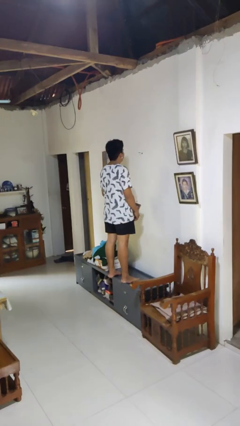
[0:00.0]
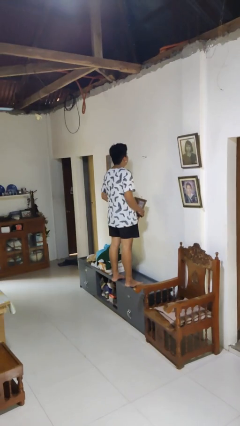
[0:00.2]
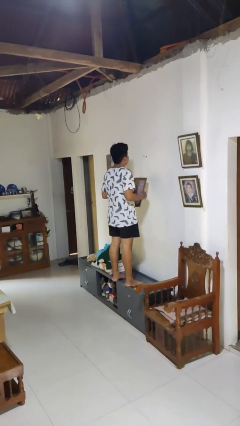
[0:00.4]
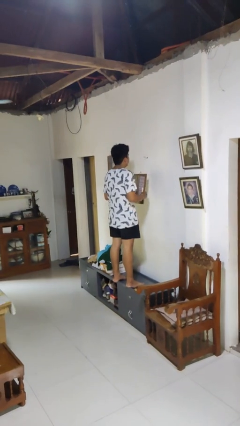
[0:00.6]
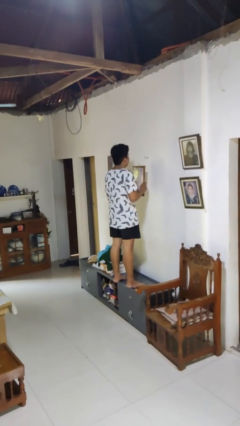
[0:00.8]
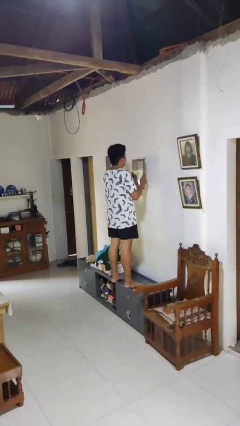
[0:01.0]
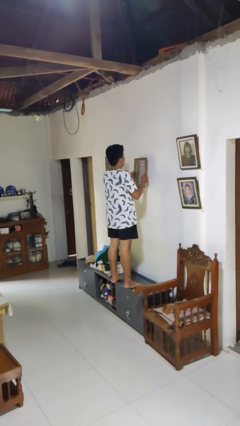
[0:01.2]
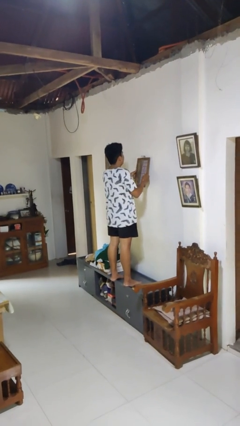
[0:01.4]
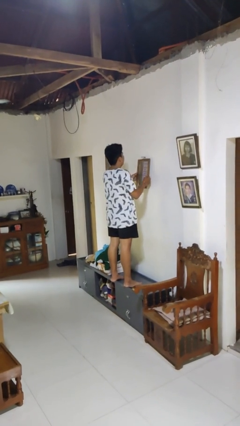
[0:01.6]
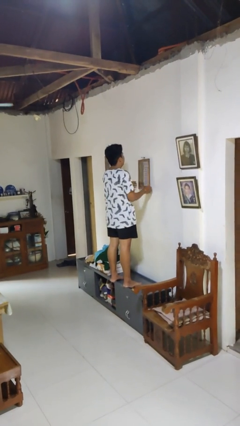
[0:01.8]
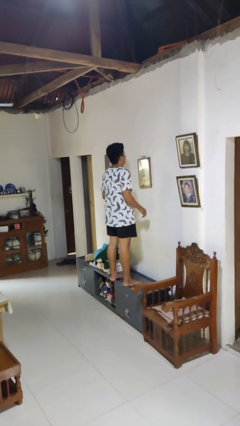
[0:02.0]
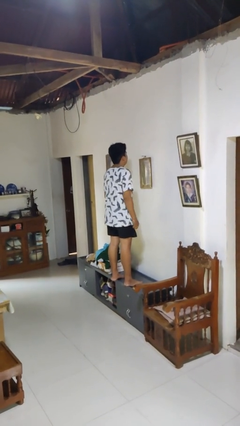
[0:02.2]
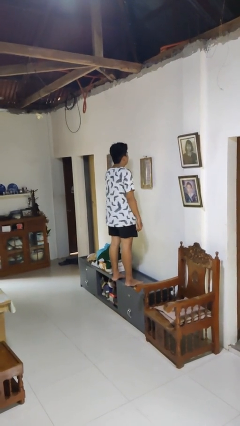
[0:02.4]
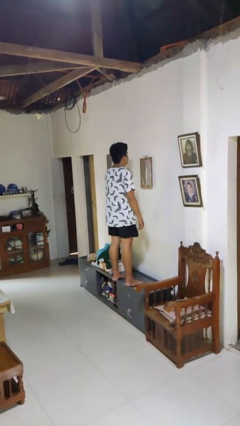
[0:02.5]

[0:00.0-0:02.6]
person puts up picture frame

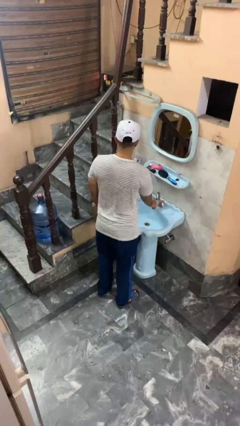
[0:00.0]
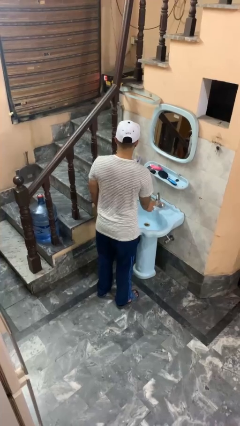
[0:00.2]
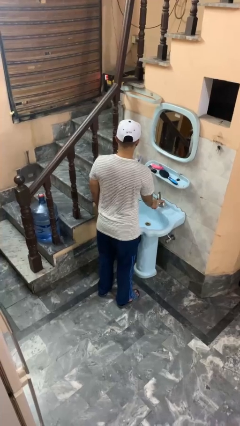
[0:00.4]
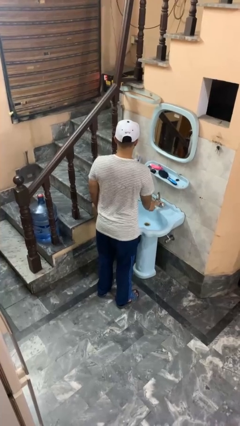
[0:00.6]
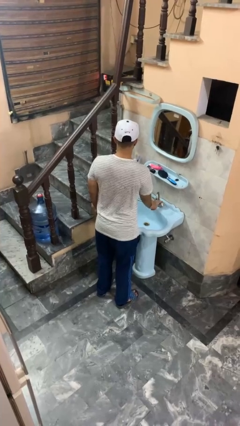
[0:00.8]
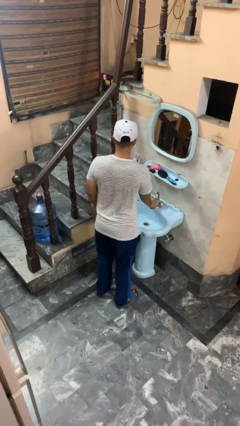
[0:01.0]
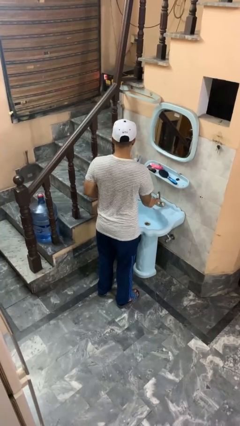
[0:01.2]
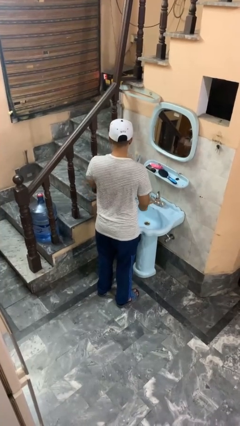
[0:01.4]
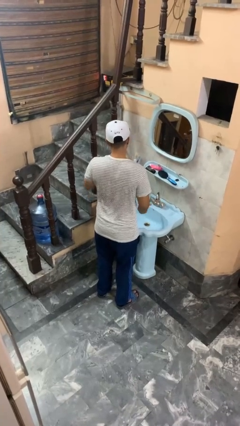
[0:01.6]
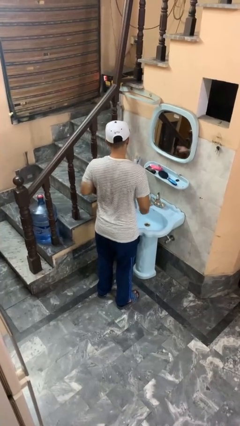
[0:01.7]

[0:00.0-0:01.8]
person turns off faucet

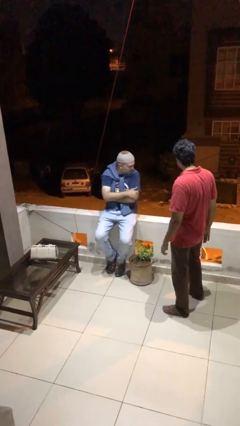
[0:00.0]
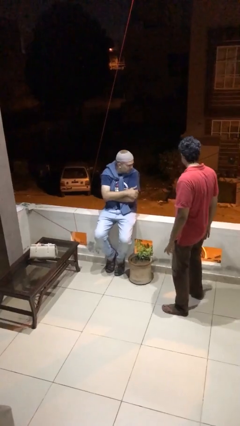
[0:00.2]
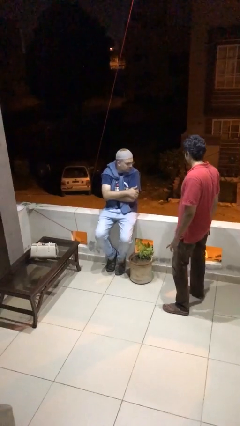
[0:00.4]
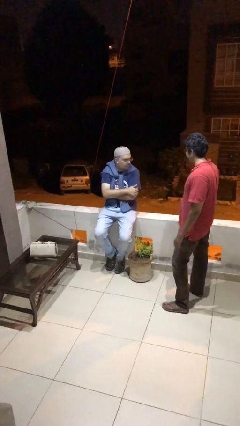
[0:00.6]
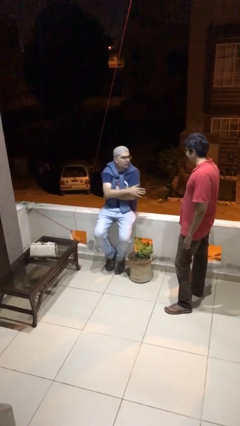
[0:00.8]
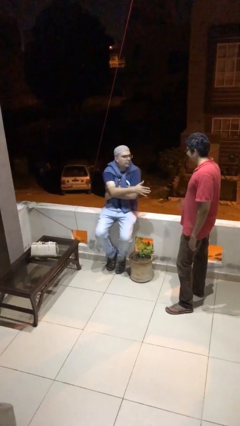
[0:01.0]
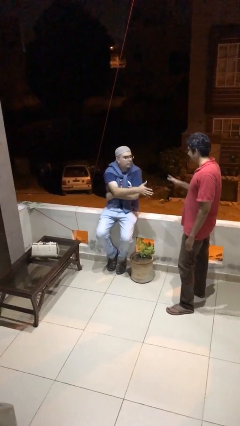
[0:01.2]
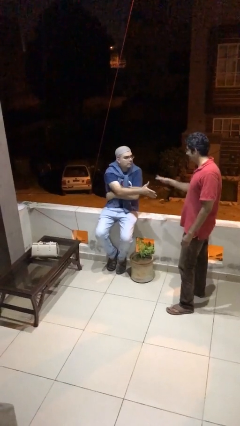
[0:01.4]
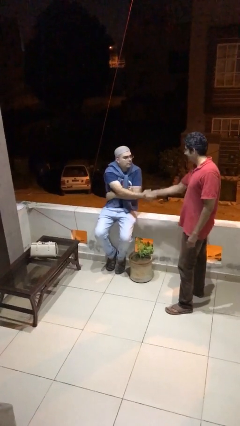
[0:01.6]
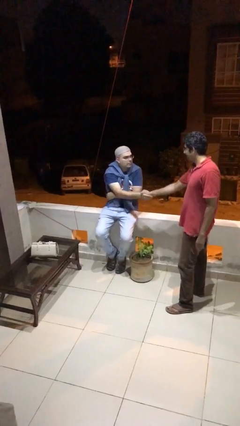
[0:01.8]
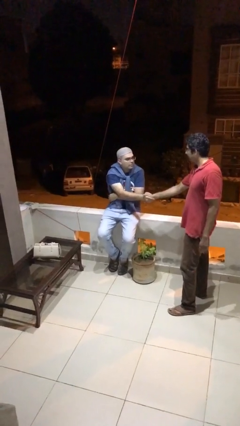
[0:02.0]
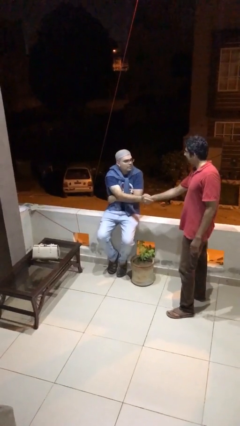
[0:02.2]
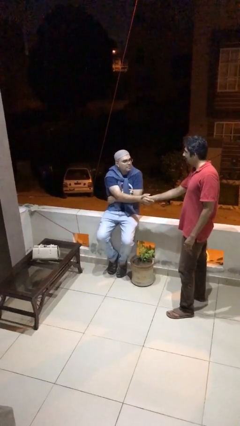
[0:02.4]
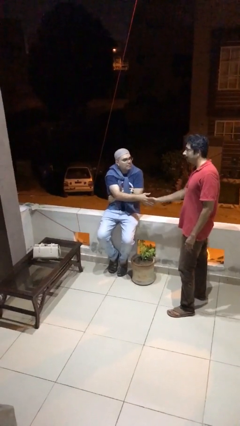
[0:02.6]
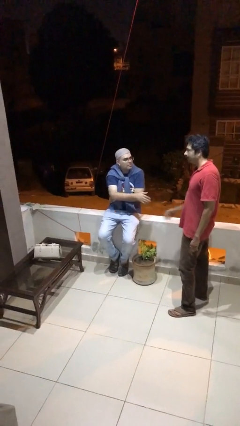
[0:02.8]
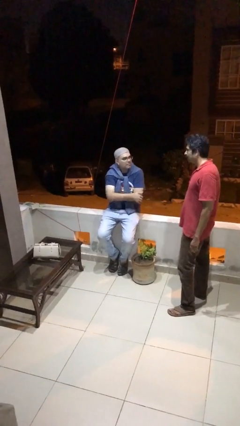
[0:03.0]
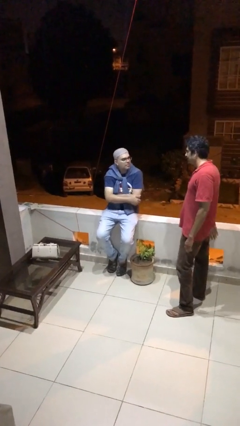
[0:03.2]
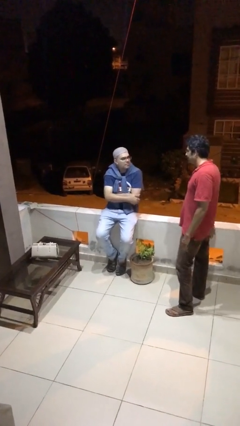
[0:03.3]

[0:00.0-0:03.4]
person shakes hand

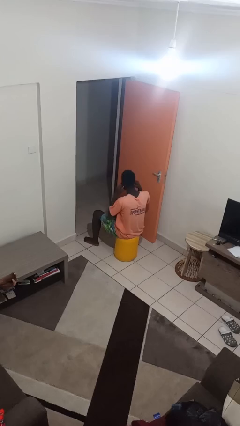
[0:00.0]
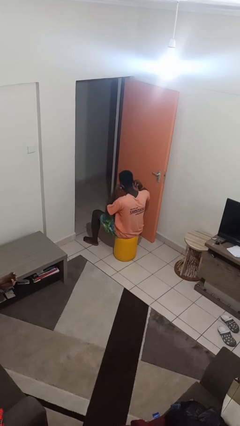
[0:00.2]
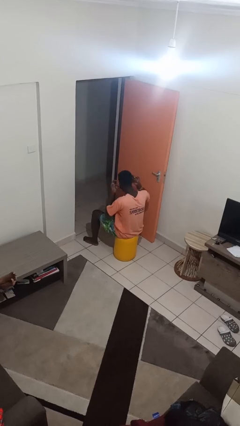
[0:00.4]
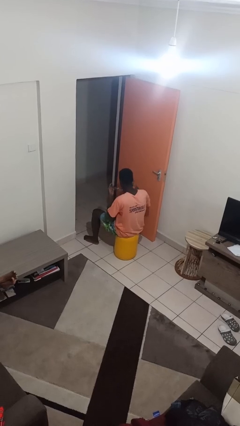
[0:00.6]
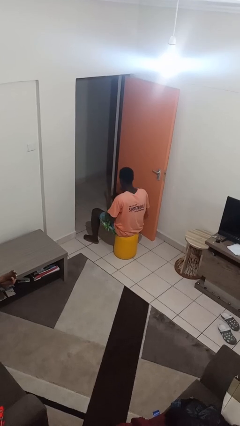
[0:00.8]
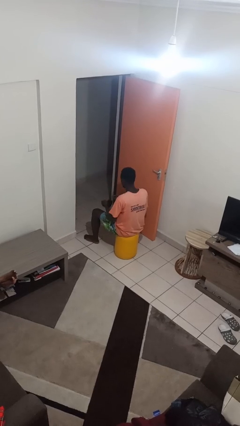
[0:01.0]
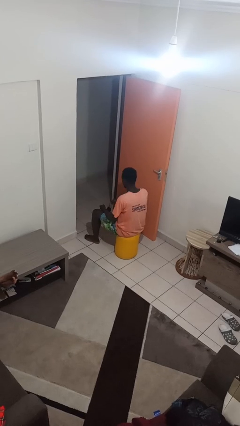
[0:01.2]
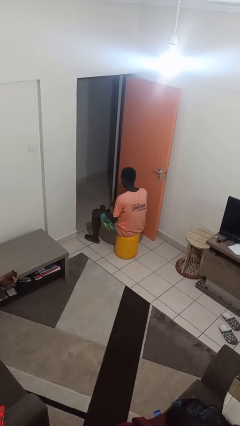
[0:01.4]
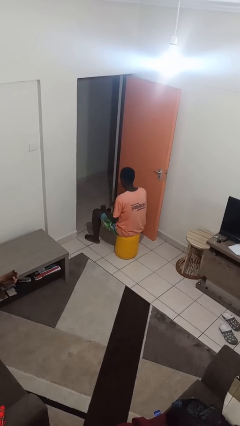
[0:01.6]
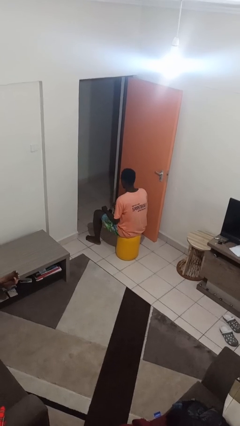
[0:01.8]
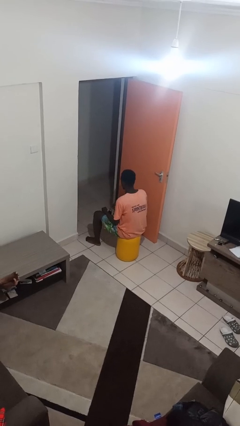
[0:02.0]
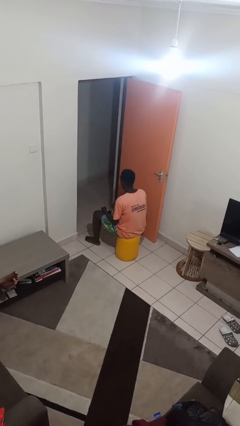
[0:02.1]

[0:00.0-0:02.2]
person takes off facemask

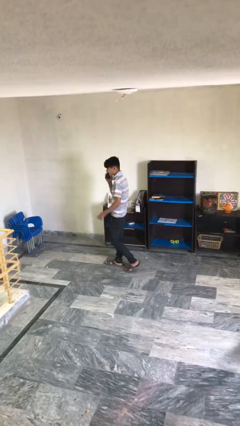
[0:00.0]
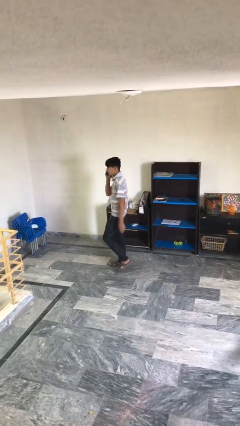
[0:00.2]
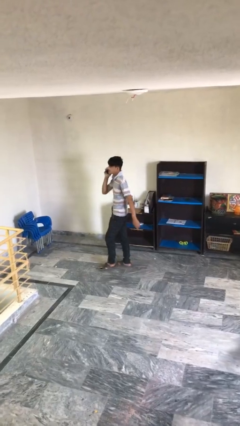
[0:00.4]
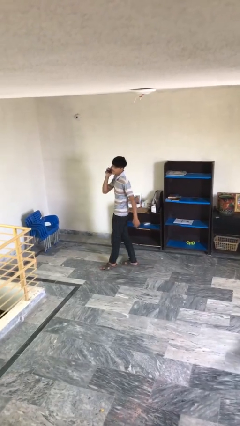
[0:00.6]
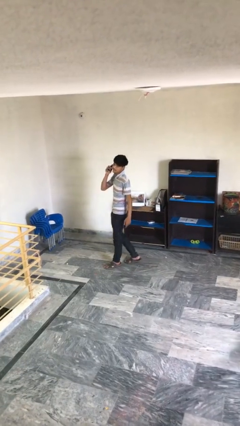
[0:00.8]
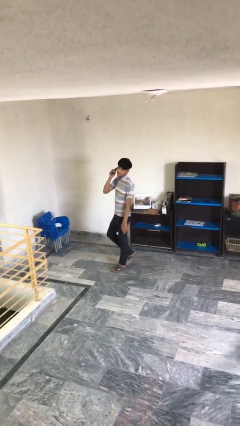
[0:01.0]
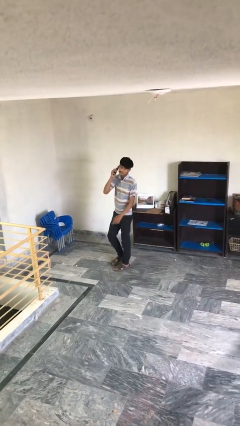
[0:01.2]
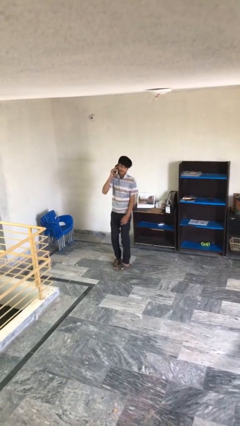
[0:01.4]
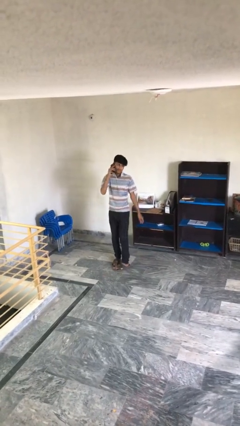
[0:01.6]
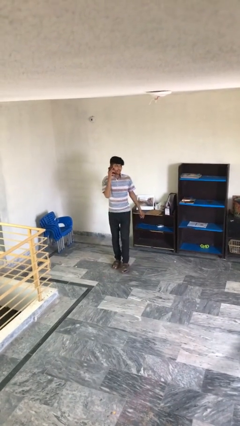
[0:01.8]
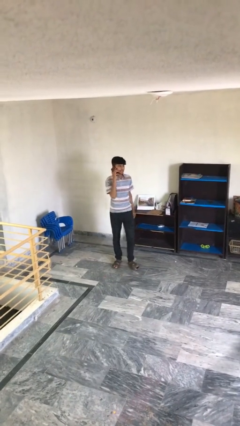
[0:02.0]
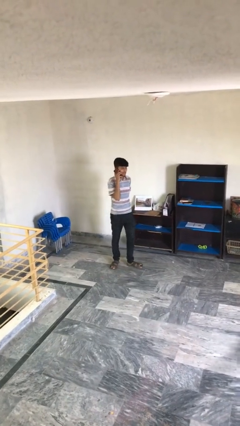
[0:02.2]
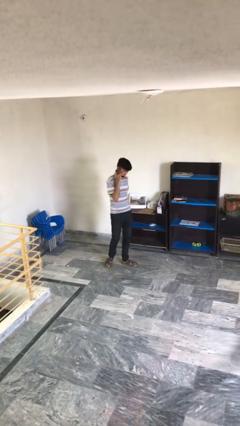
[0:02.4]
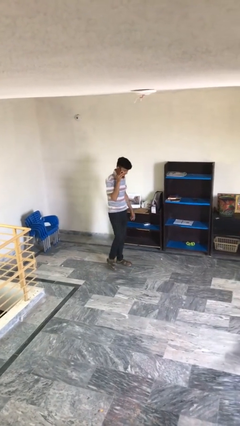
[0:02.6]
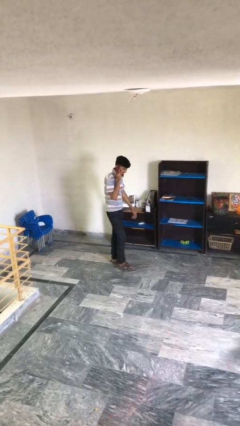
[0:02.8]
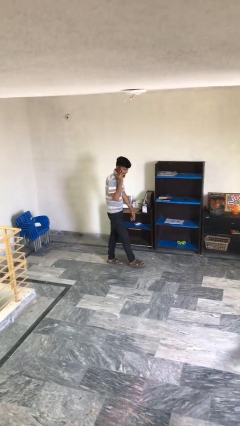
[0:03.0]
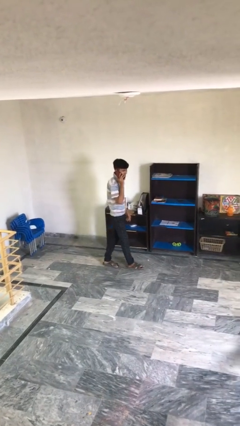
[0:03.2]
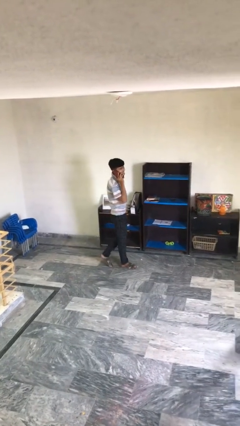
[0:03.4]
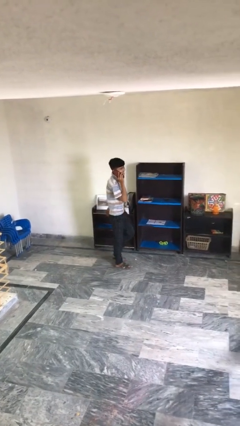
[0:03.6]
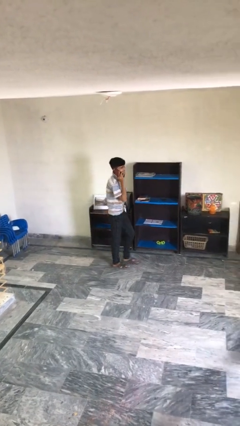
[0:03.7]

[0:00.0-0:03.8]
person talks on phone

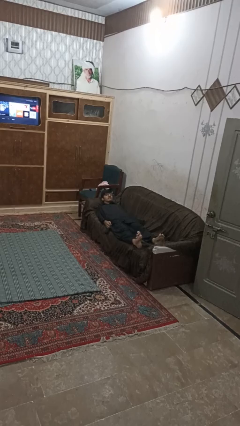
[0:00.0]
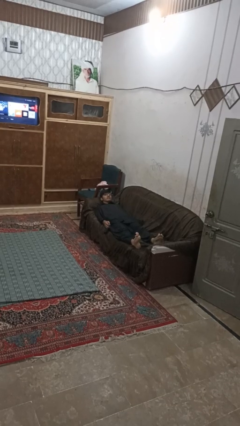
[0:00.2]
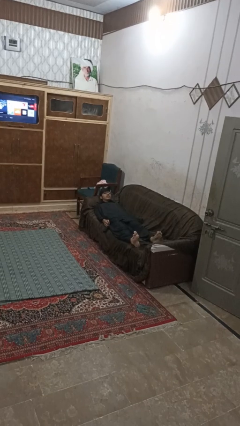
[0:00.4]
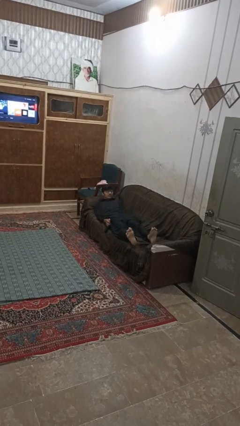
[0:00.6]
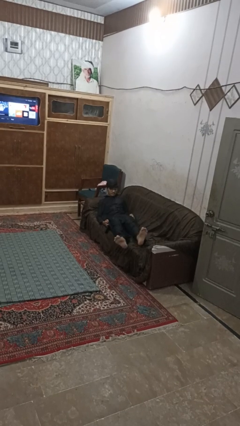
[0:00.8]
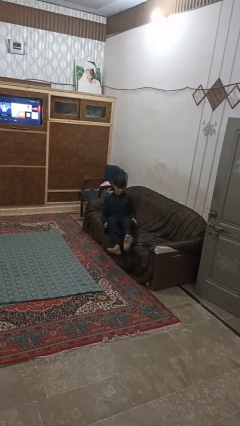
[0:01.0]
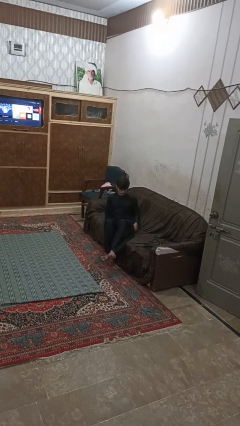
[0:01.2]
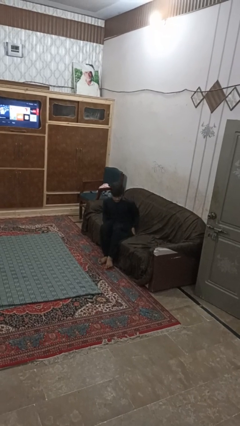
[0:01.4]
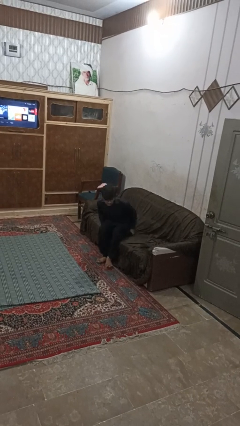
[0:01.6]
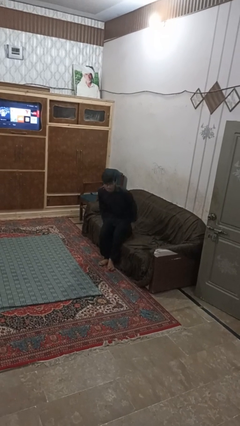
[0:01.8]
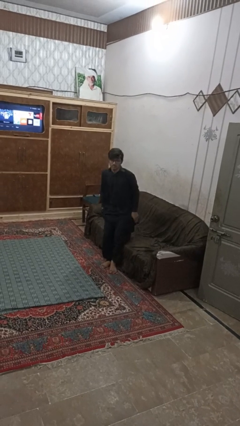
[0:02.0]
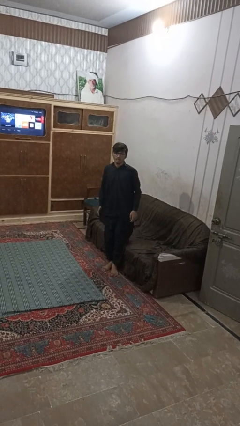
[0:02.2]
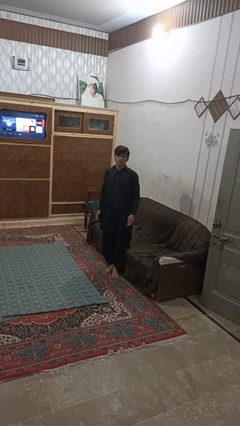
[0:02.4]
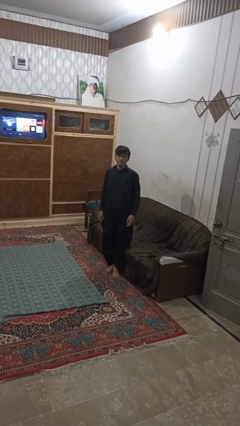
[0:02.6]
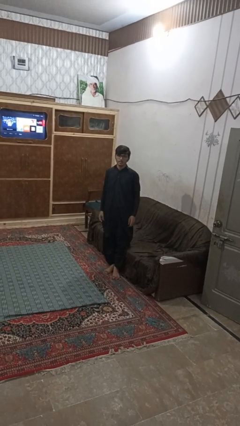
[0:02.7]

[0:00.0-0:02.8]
person stands up
